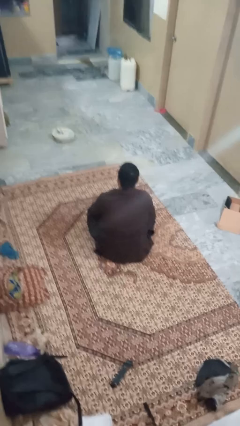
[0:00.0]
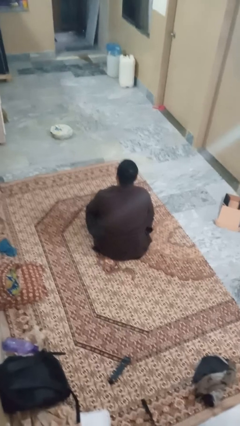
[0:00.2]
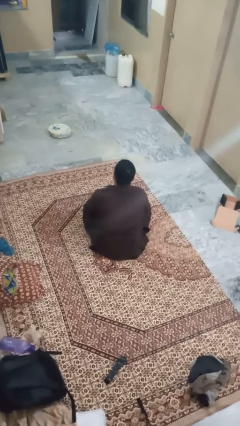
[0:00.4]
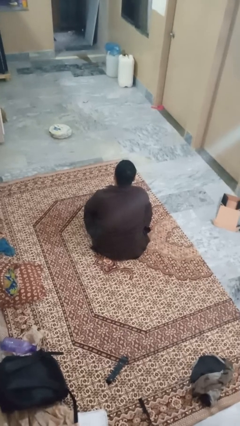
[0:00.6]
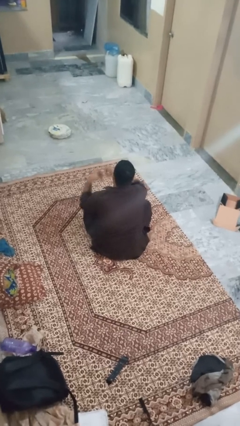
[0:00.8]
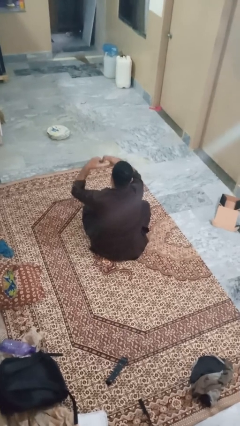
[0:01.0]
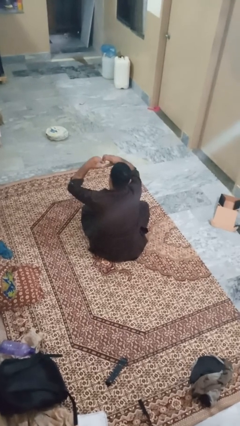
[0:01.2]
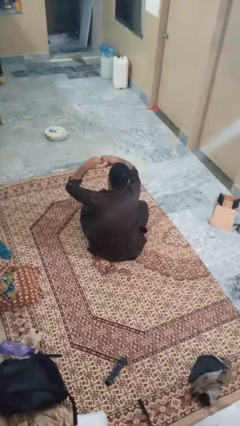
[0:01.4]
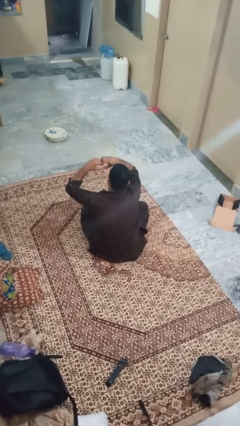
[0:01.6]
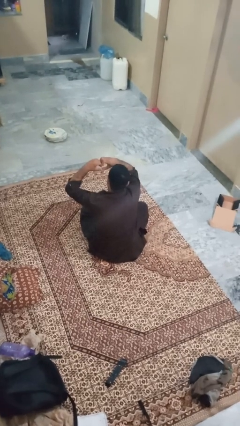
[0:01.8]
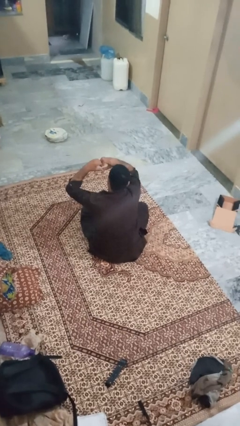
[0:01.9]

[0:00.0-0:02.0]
person gestures heart

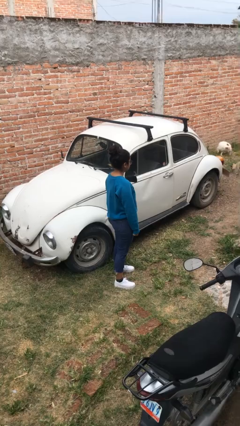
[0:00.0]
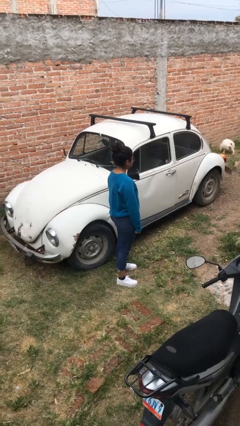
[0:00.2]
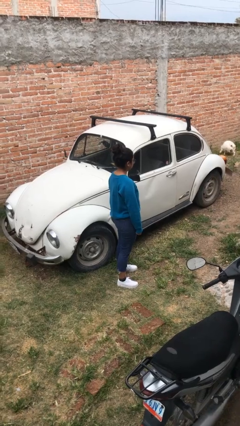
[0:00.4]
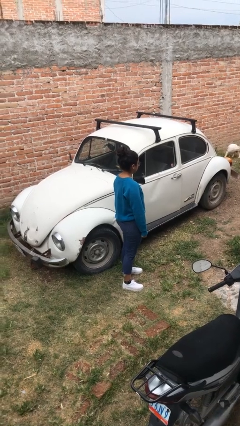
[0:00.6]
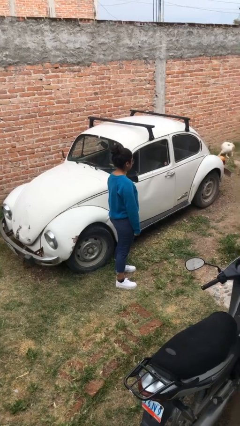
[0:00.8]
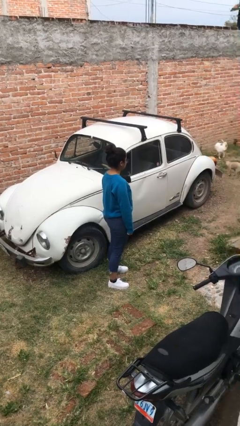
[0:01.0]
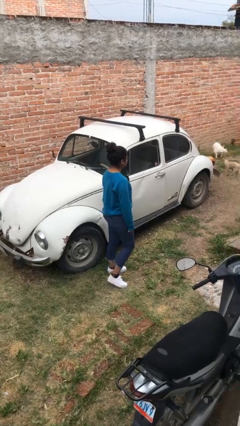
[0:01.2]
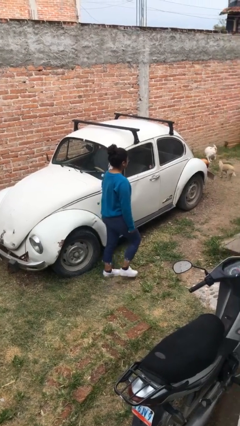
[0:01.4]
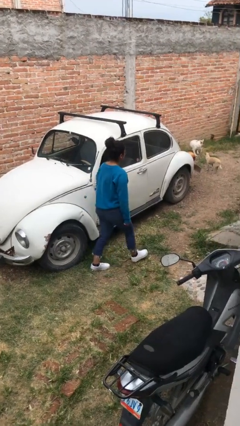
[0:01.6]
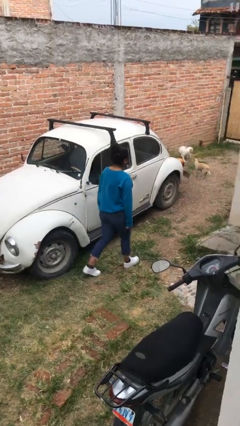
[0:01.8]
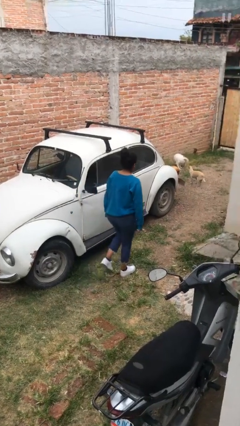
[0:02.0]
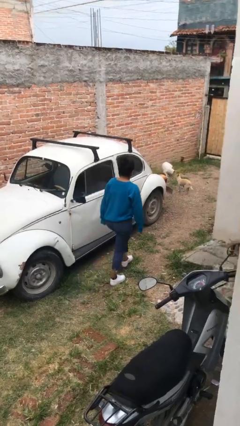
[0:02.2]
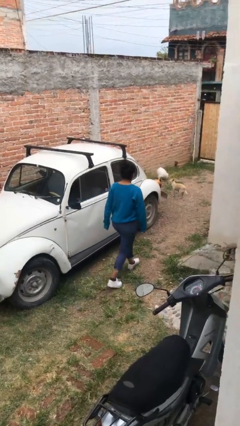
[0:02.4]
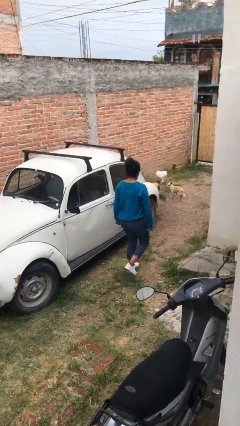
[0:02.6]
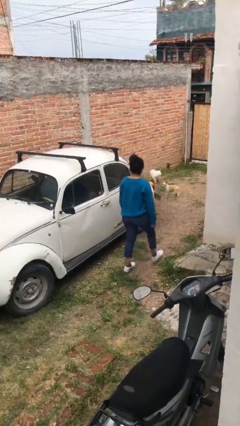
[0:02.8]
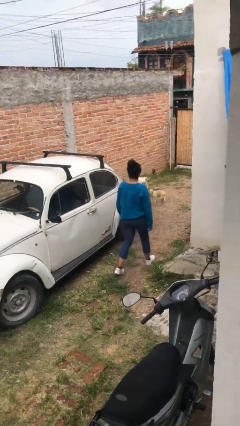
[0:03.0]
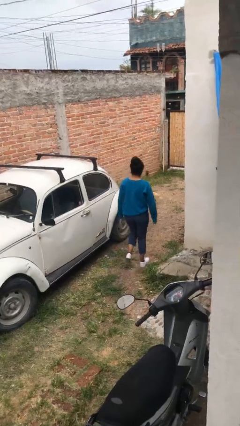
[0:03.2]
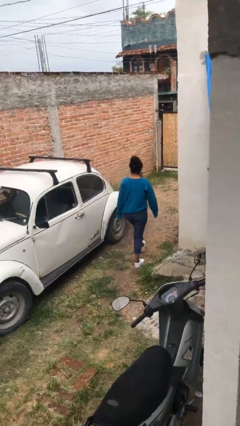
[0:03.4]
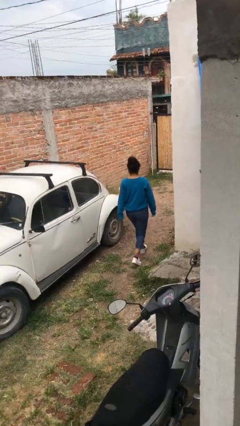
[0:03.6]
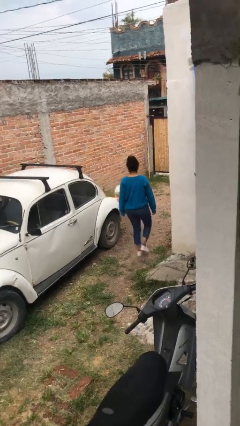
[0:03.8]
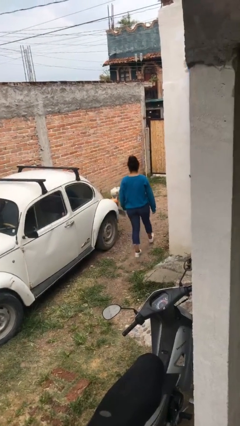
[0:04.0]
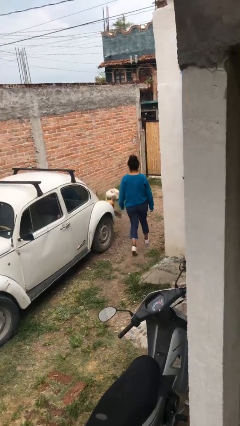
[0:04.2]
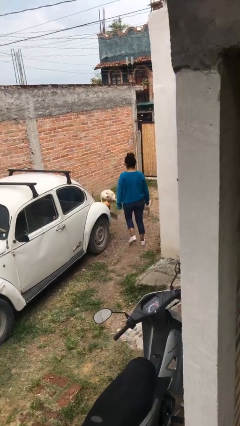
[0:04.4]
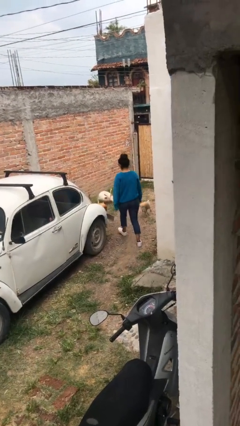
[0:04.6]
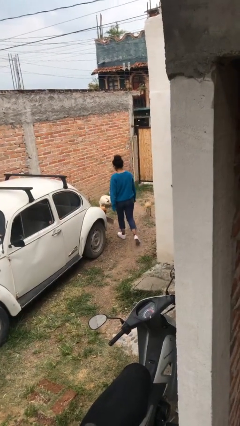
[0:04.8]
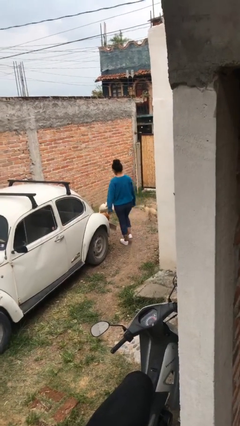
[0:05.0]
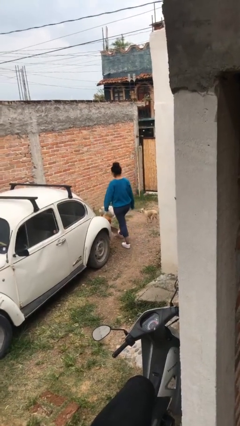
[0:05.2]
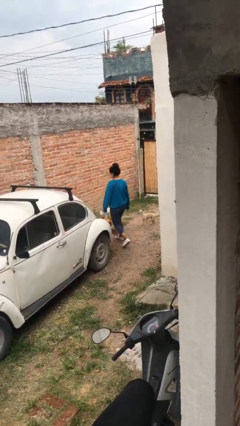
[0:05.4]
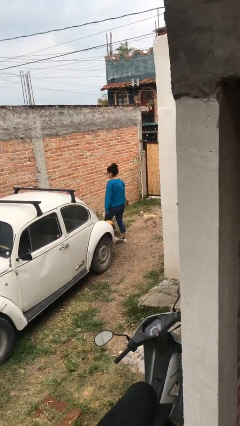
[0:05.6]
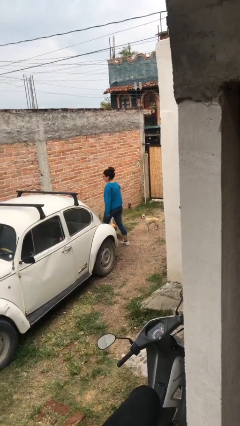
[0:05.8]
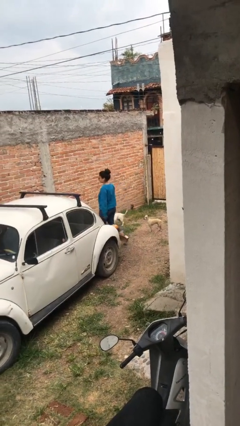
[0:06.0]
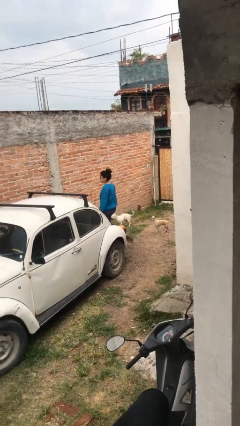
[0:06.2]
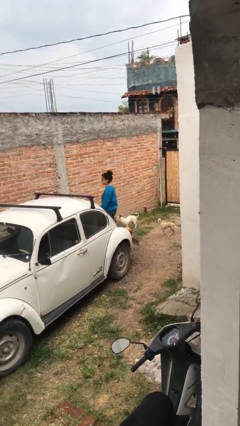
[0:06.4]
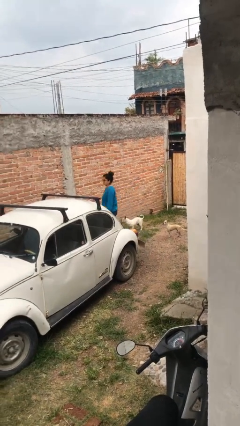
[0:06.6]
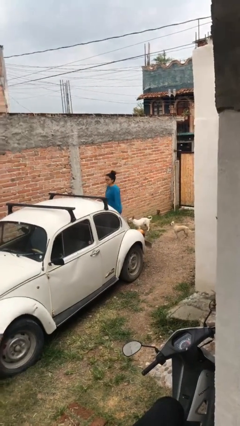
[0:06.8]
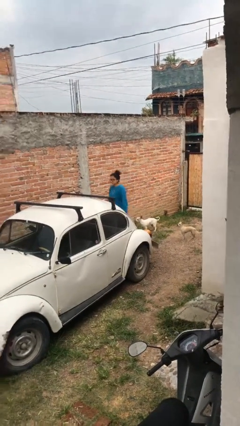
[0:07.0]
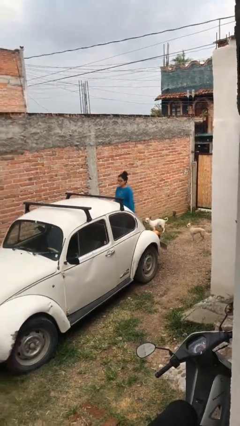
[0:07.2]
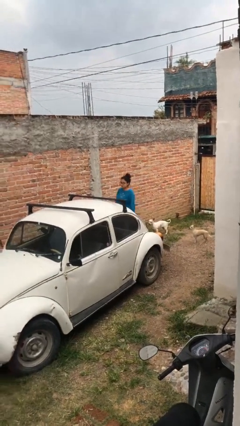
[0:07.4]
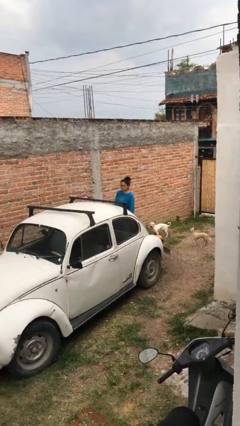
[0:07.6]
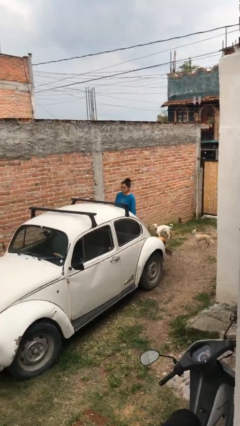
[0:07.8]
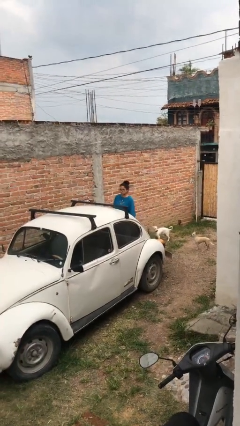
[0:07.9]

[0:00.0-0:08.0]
person walks around car

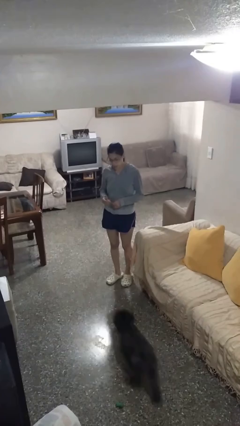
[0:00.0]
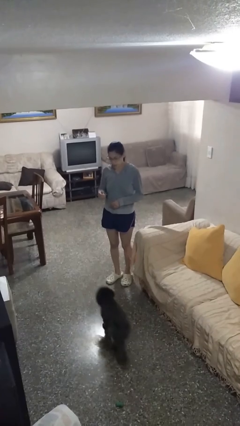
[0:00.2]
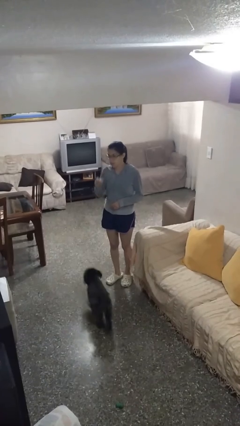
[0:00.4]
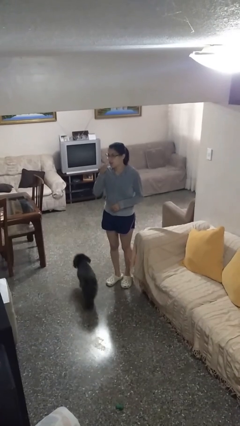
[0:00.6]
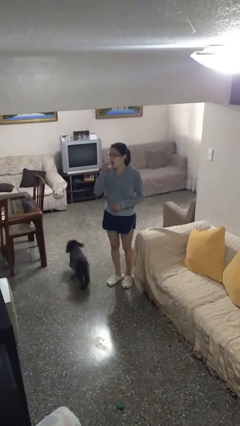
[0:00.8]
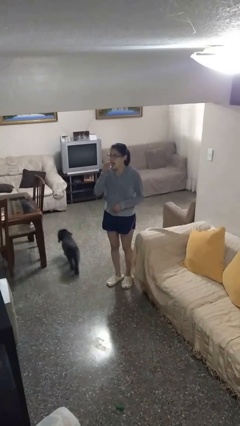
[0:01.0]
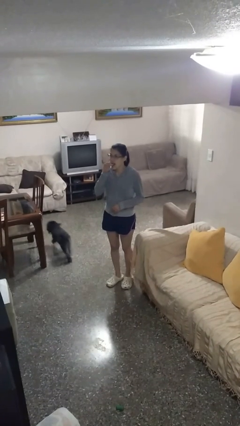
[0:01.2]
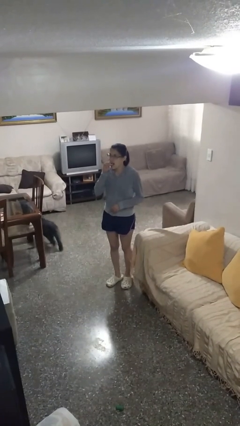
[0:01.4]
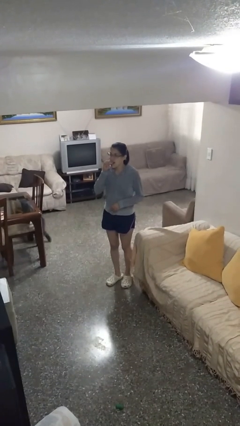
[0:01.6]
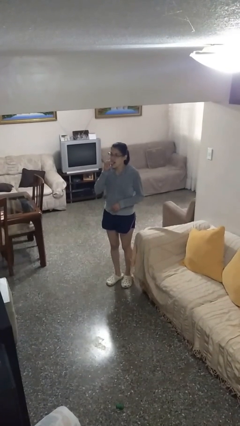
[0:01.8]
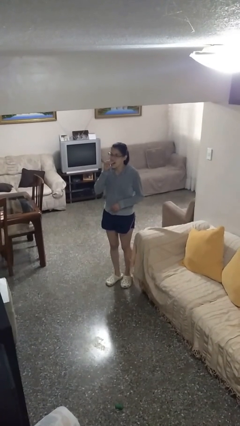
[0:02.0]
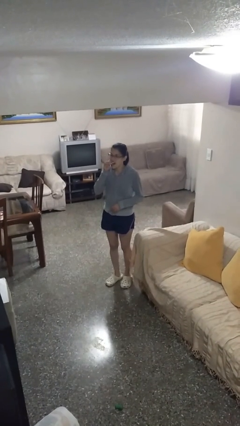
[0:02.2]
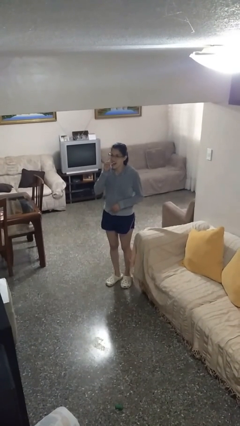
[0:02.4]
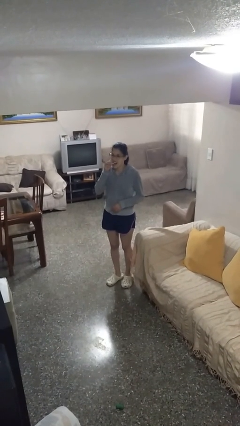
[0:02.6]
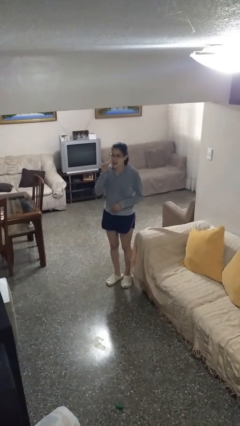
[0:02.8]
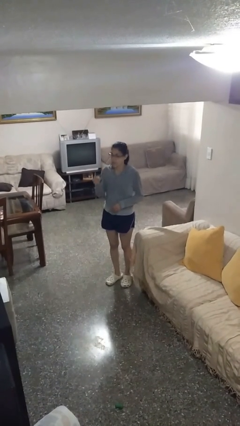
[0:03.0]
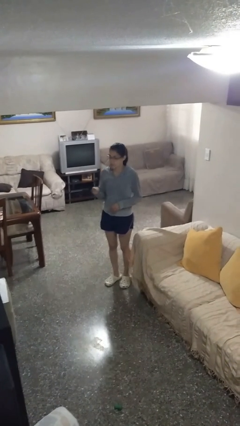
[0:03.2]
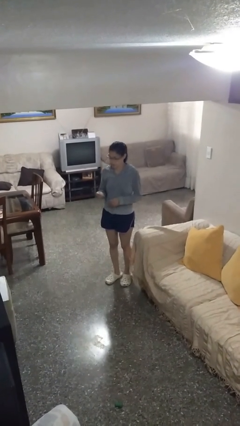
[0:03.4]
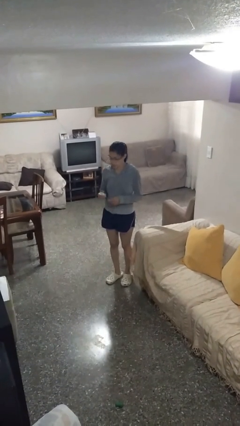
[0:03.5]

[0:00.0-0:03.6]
person flosses

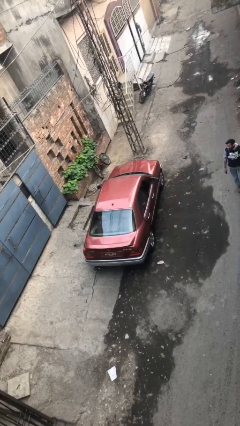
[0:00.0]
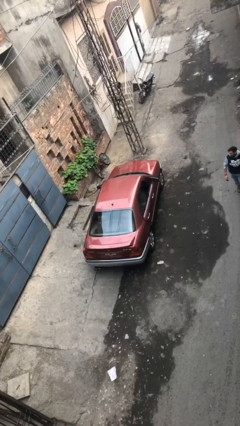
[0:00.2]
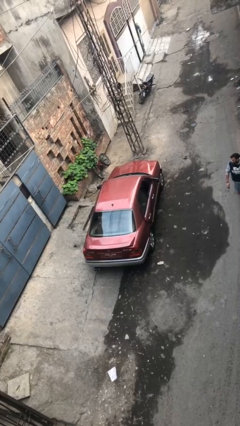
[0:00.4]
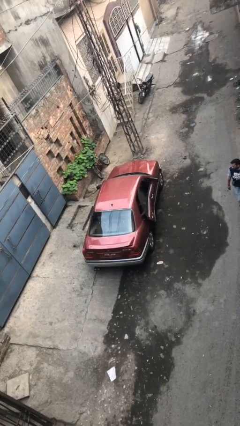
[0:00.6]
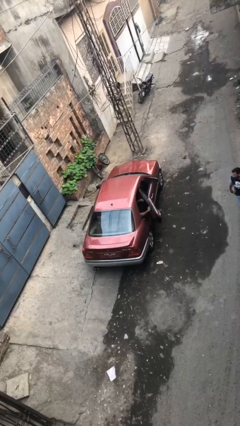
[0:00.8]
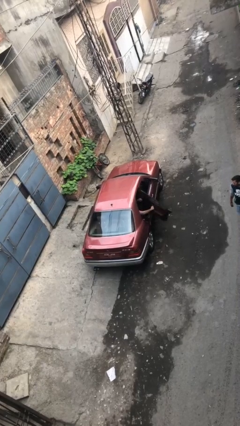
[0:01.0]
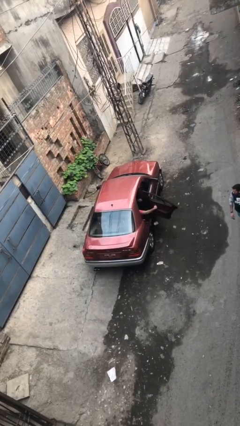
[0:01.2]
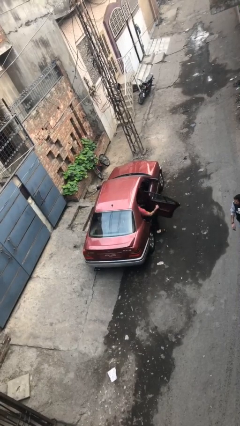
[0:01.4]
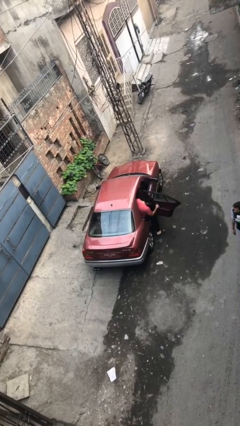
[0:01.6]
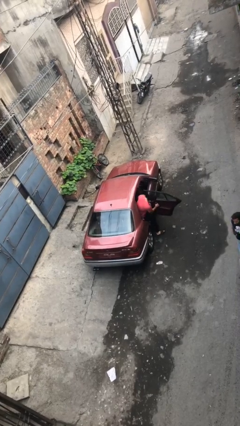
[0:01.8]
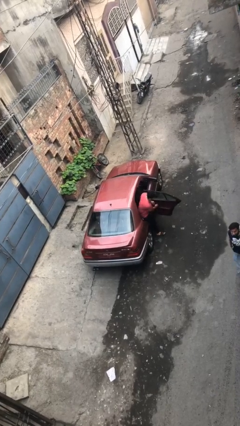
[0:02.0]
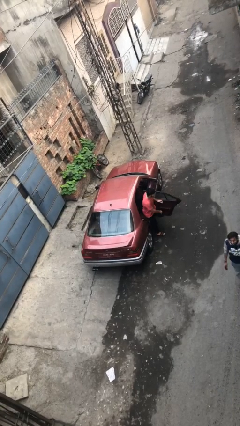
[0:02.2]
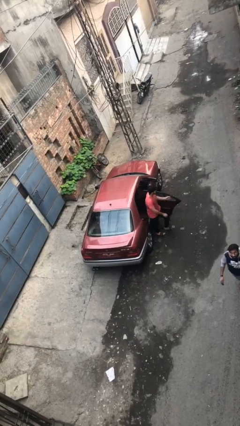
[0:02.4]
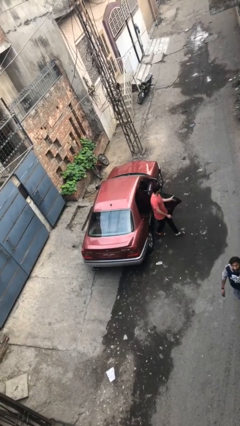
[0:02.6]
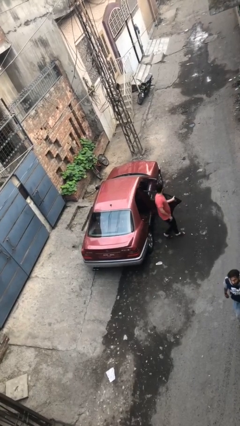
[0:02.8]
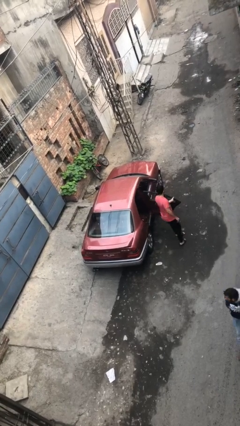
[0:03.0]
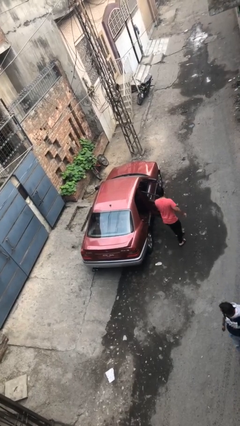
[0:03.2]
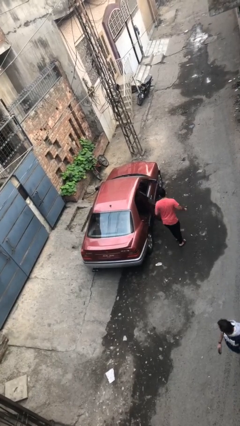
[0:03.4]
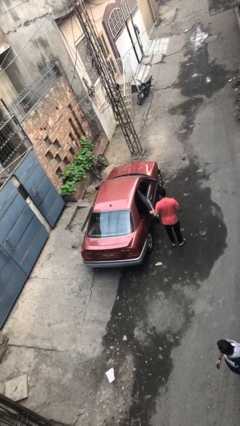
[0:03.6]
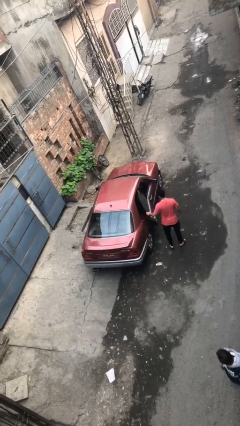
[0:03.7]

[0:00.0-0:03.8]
car drops off person
